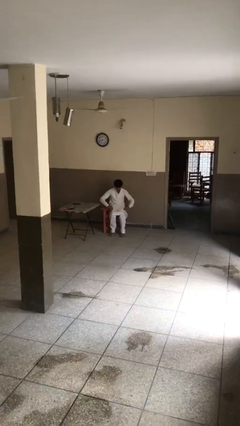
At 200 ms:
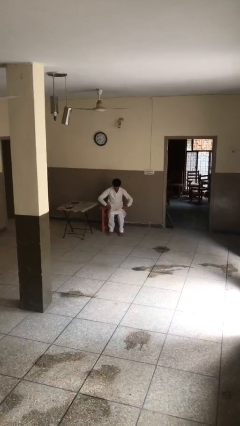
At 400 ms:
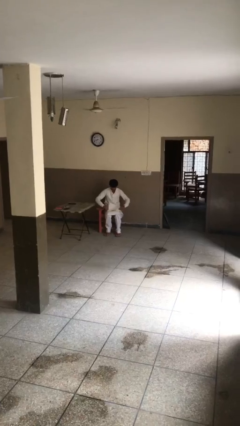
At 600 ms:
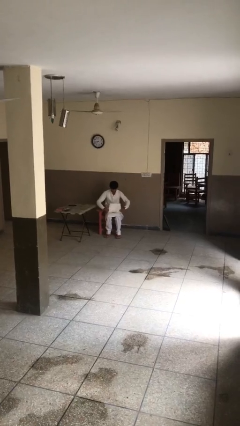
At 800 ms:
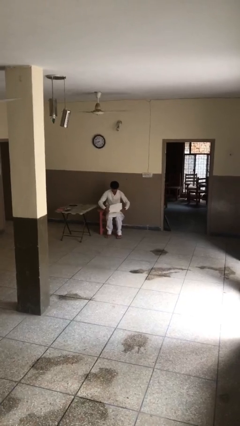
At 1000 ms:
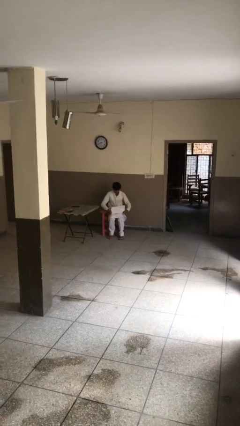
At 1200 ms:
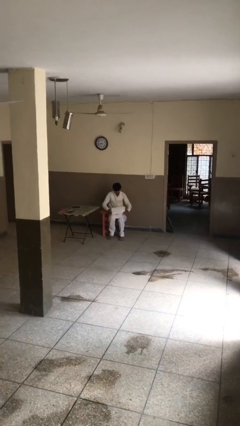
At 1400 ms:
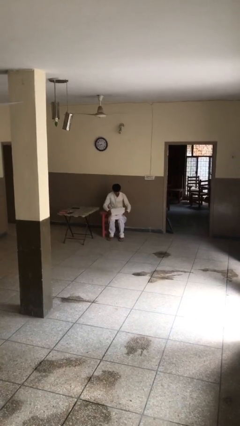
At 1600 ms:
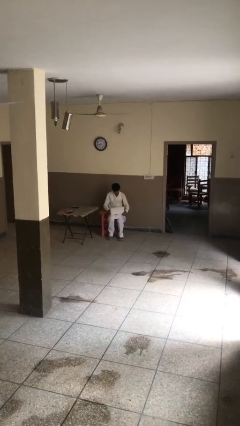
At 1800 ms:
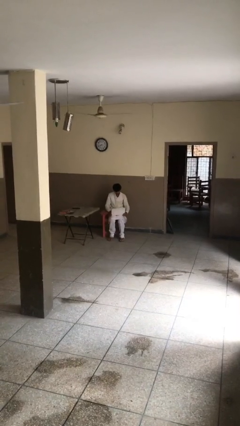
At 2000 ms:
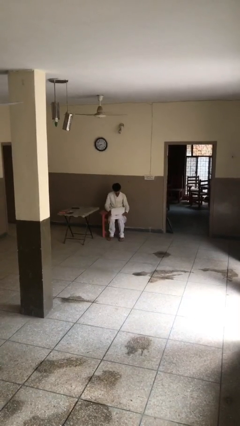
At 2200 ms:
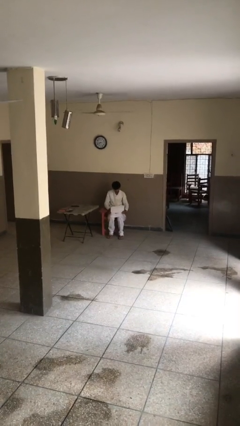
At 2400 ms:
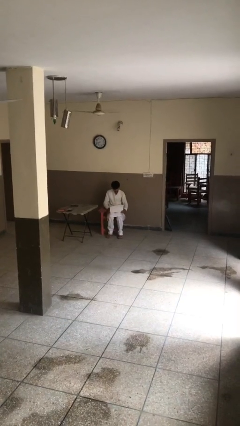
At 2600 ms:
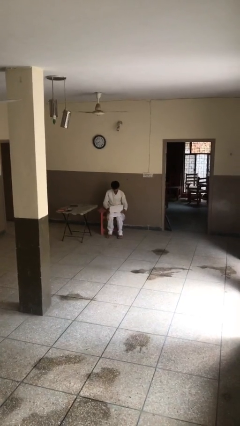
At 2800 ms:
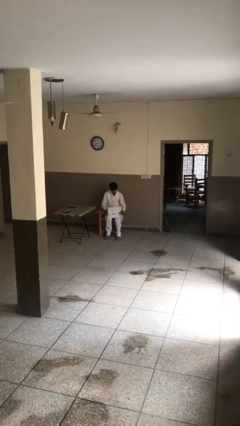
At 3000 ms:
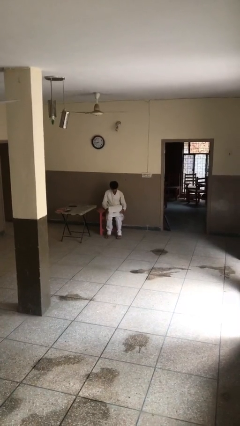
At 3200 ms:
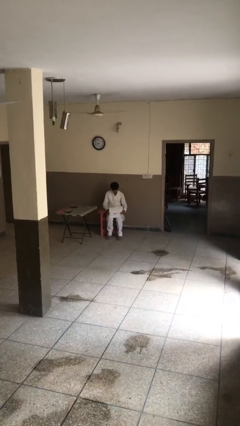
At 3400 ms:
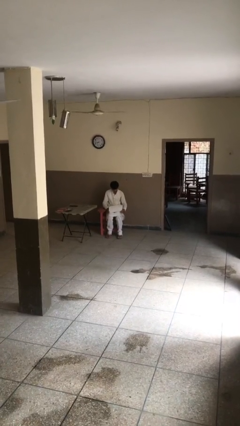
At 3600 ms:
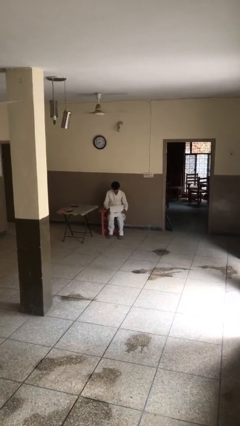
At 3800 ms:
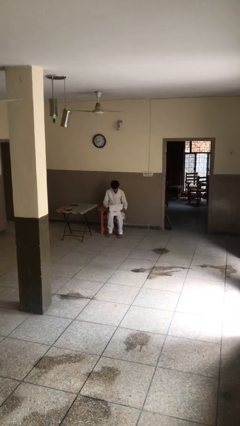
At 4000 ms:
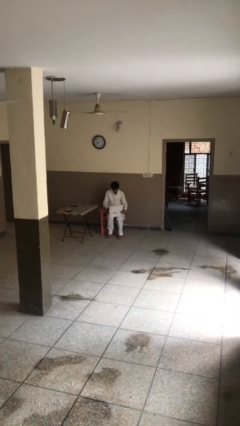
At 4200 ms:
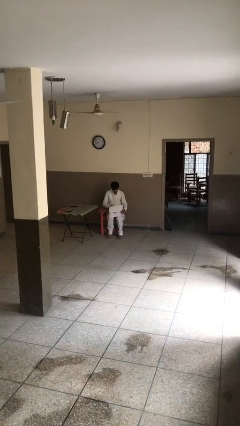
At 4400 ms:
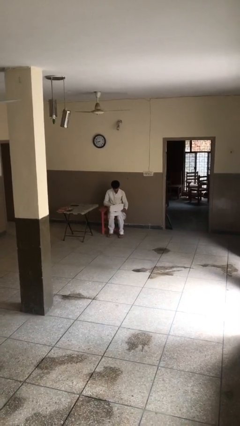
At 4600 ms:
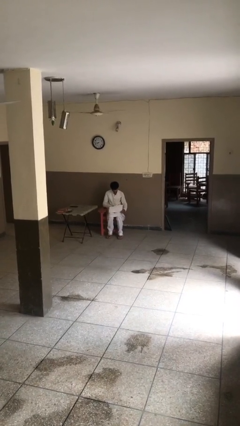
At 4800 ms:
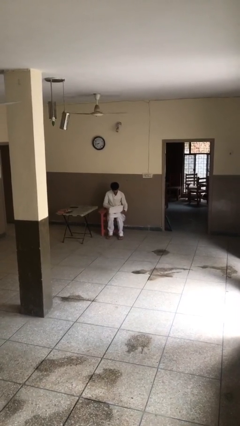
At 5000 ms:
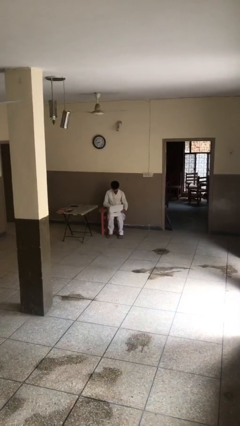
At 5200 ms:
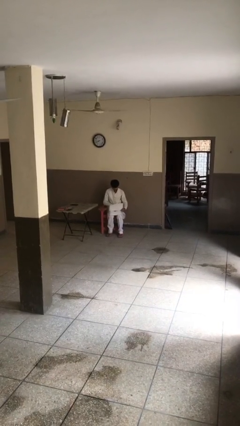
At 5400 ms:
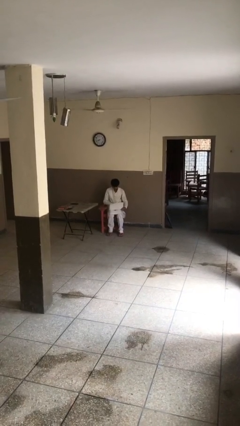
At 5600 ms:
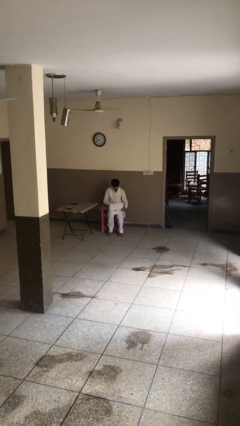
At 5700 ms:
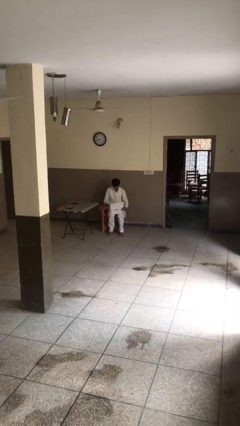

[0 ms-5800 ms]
person interacts with laptop

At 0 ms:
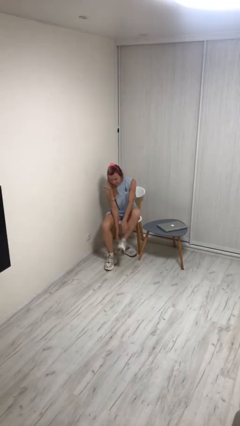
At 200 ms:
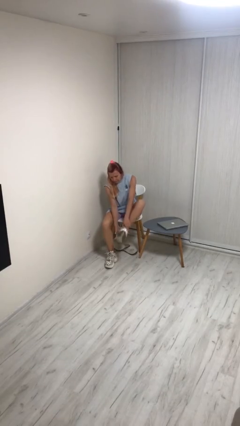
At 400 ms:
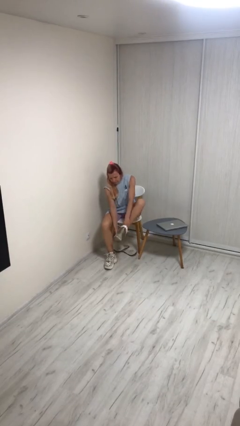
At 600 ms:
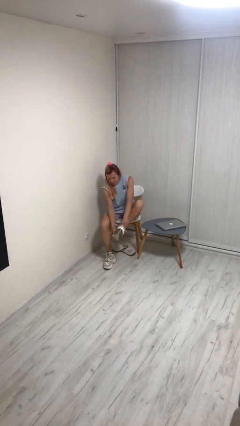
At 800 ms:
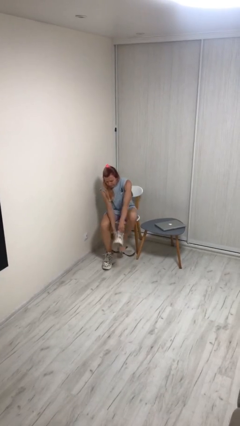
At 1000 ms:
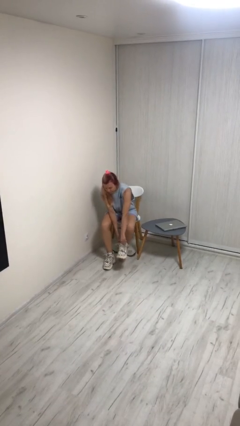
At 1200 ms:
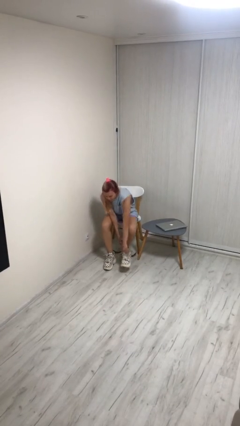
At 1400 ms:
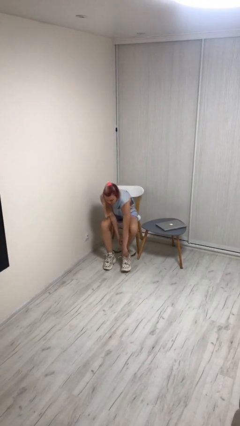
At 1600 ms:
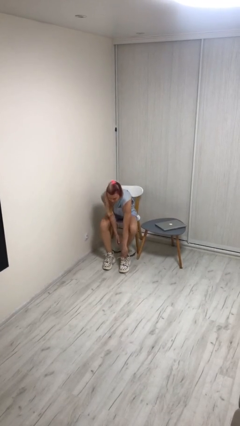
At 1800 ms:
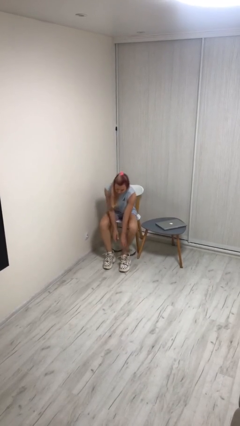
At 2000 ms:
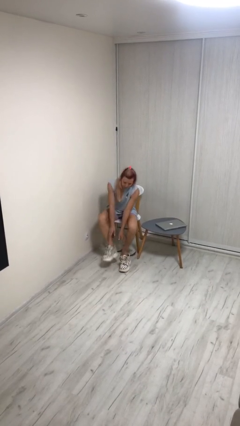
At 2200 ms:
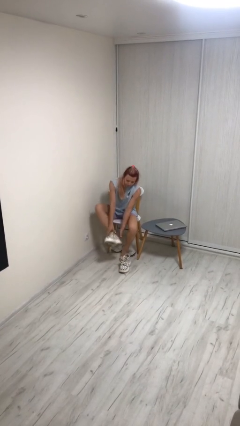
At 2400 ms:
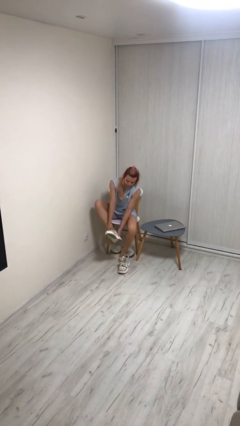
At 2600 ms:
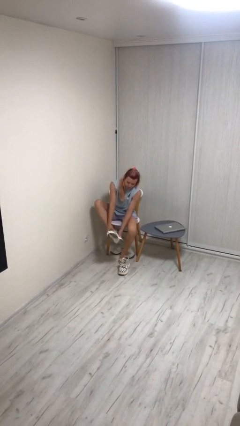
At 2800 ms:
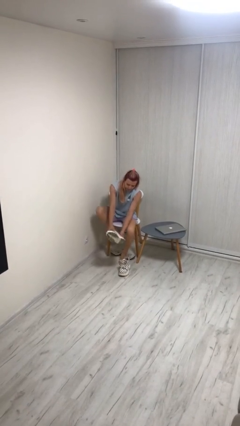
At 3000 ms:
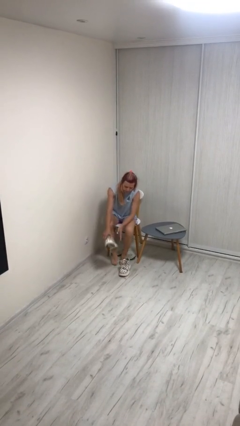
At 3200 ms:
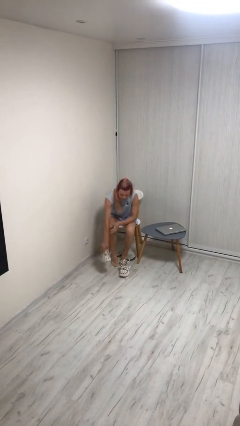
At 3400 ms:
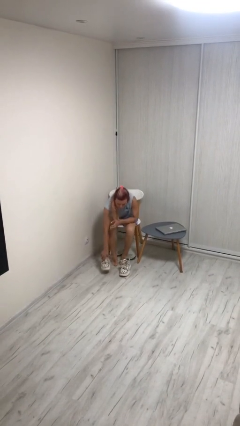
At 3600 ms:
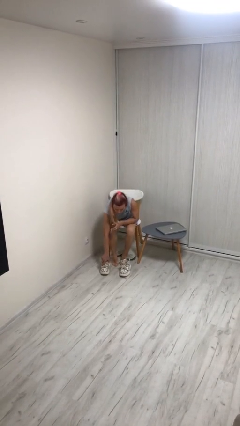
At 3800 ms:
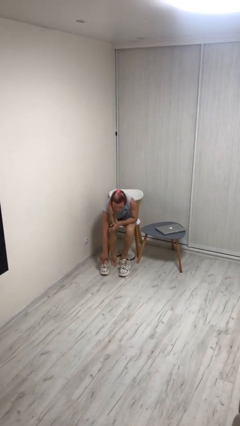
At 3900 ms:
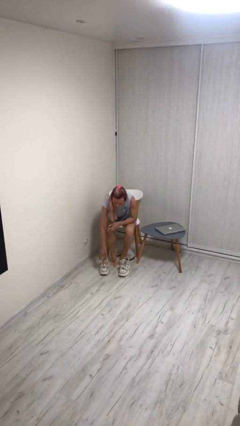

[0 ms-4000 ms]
person takes off boots

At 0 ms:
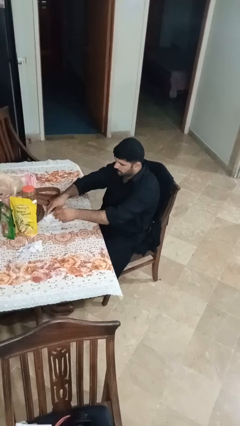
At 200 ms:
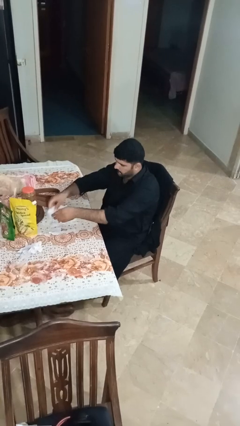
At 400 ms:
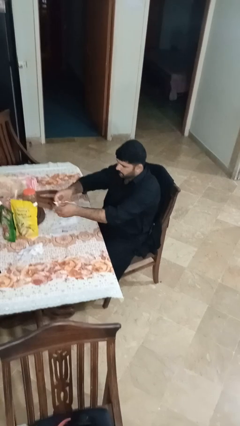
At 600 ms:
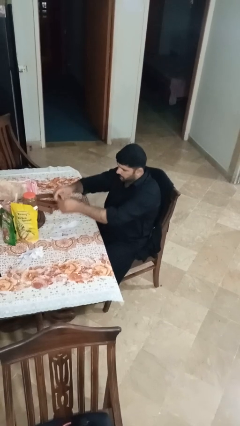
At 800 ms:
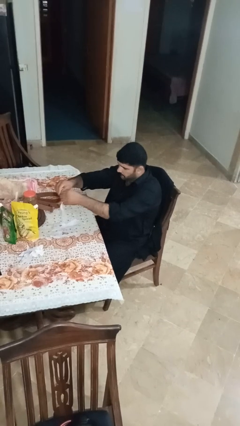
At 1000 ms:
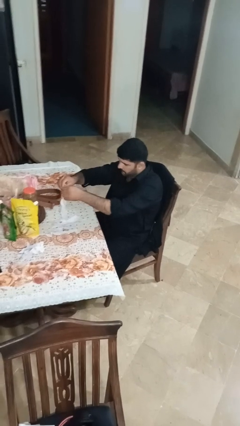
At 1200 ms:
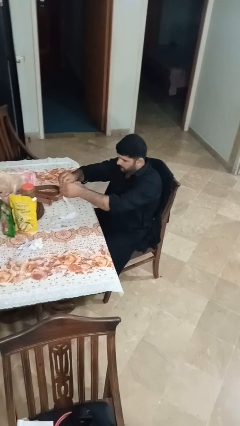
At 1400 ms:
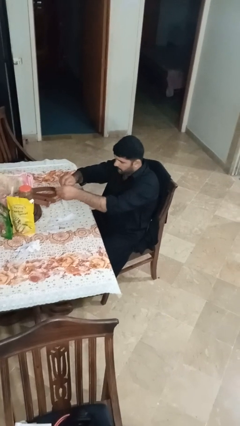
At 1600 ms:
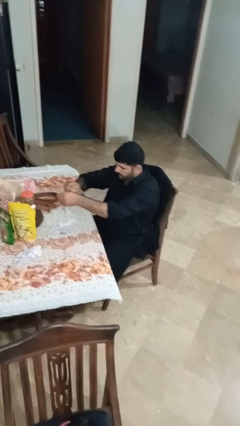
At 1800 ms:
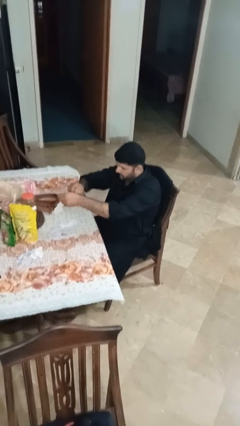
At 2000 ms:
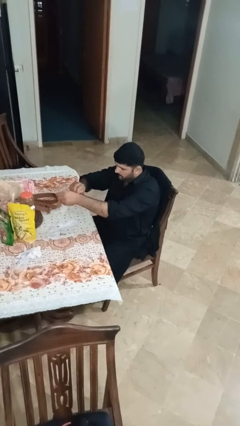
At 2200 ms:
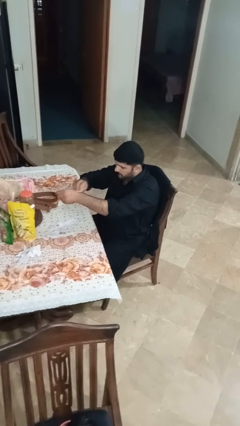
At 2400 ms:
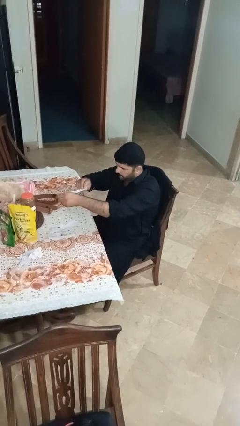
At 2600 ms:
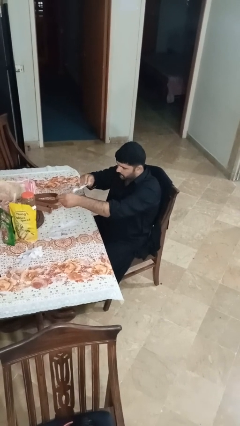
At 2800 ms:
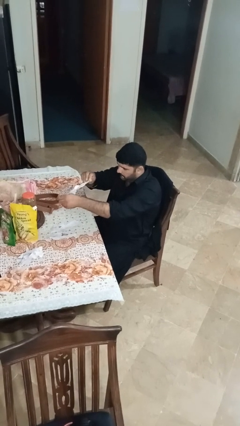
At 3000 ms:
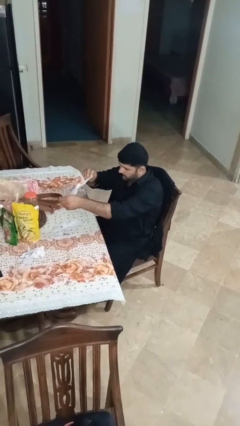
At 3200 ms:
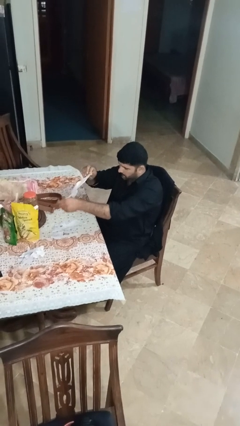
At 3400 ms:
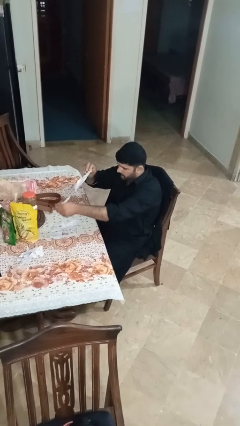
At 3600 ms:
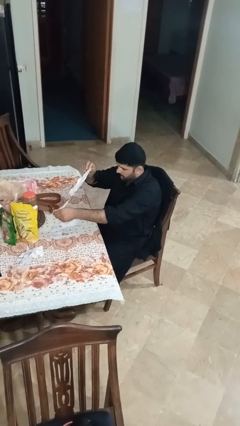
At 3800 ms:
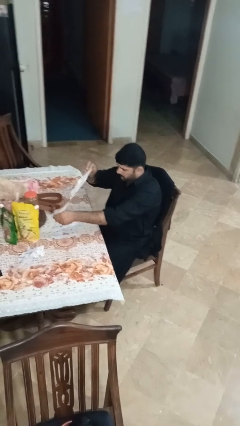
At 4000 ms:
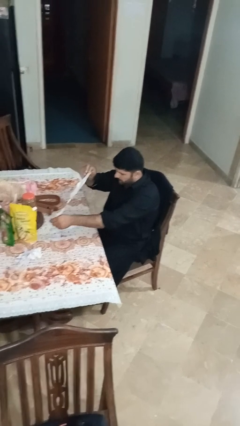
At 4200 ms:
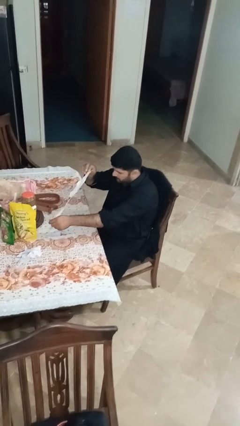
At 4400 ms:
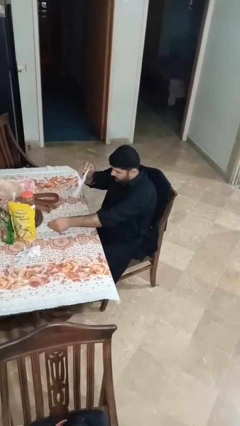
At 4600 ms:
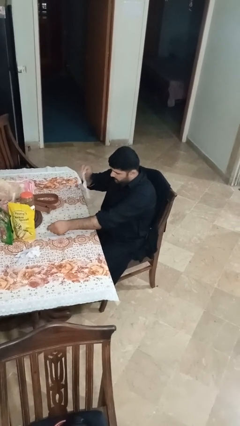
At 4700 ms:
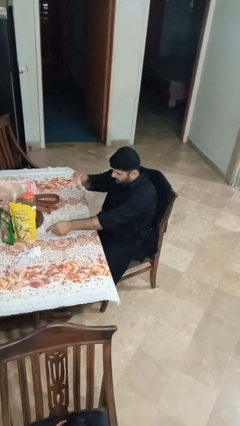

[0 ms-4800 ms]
person tears paper

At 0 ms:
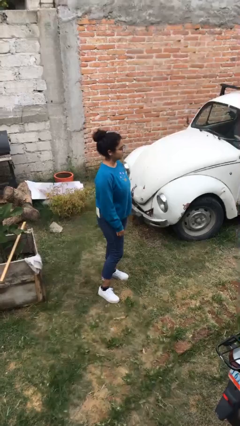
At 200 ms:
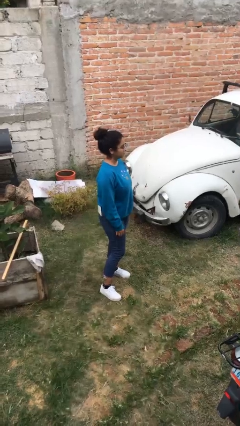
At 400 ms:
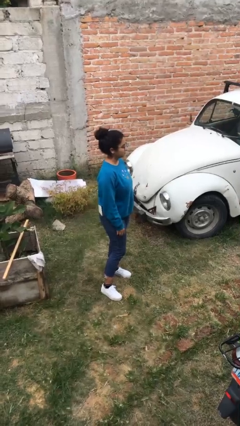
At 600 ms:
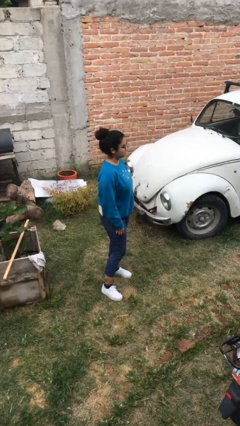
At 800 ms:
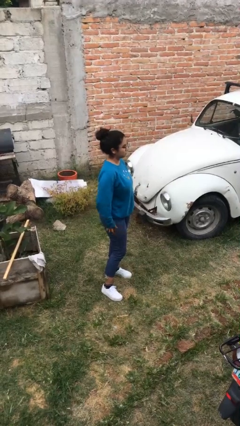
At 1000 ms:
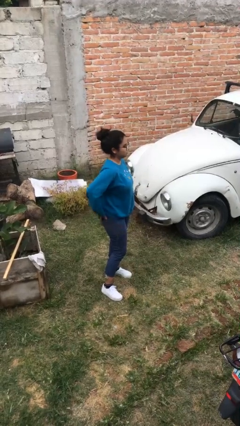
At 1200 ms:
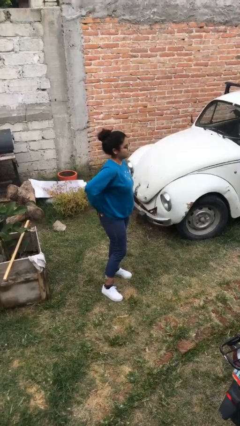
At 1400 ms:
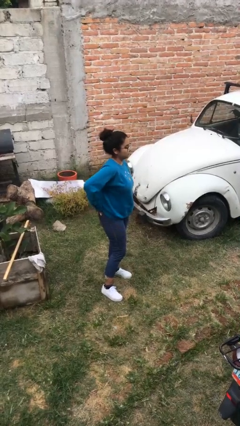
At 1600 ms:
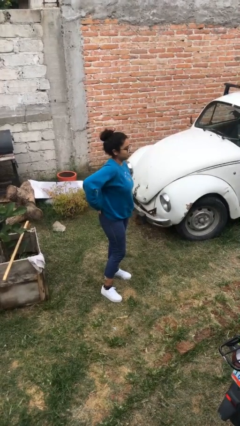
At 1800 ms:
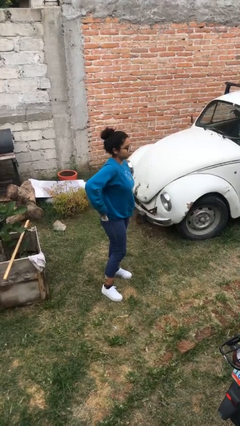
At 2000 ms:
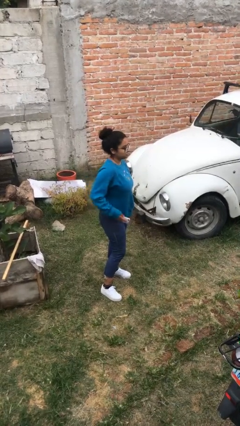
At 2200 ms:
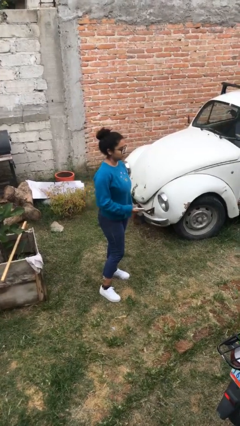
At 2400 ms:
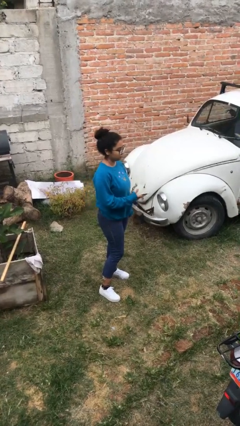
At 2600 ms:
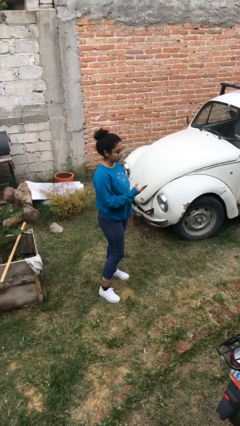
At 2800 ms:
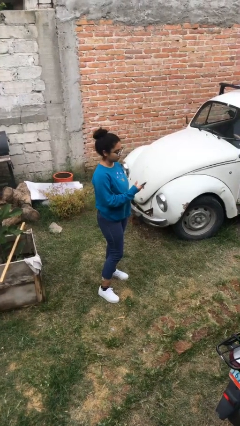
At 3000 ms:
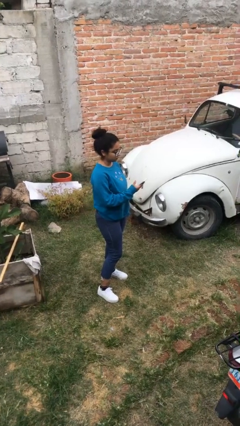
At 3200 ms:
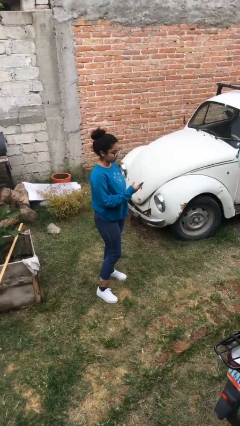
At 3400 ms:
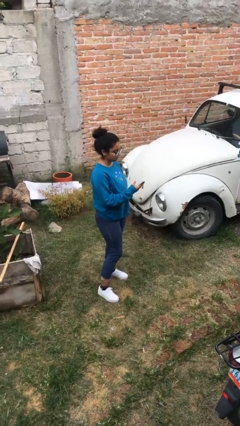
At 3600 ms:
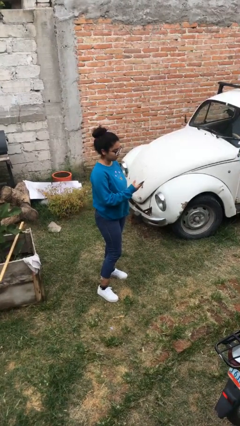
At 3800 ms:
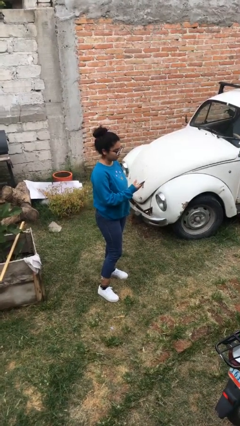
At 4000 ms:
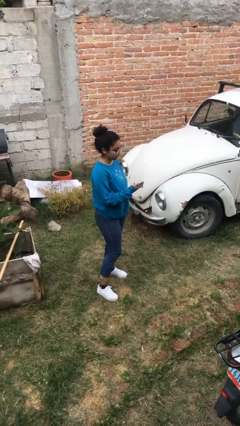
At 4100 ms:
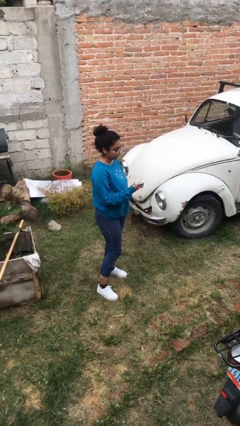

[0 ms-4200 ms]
person takes phone from pocket
